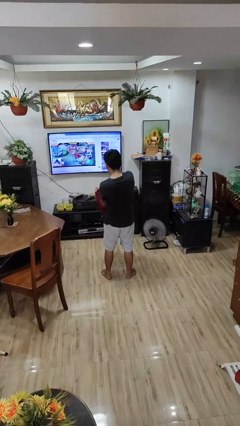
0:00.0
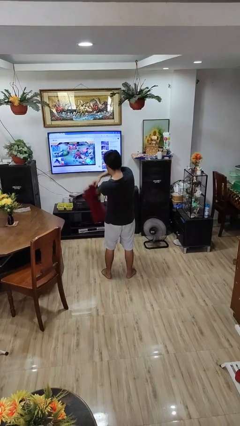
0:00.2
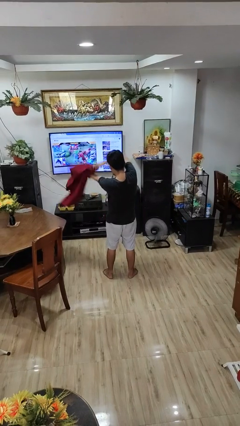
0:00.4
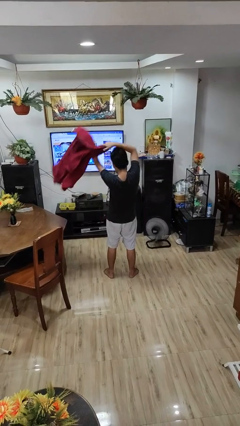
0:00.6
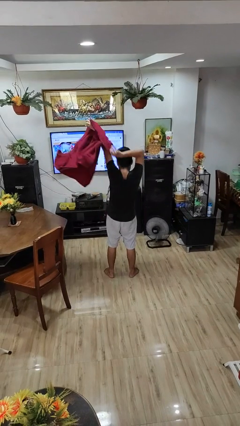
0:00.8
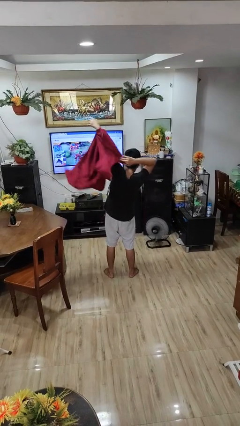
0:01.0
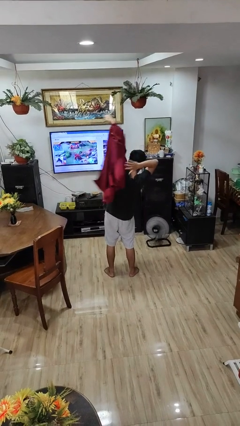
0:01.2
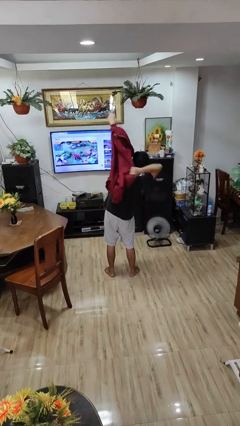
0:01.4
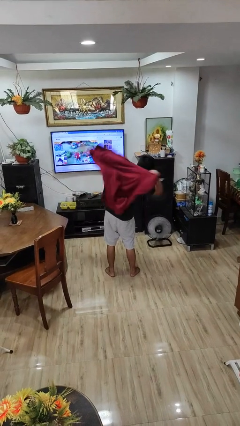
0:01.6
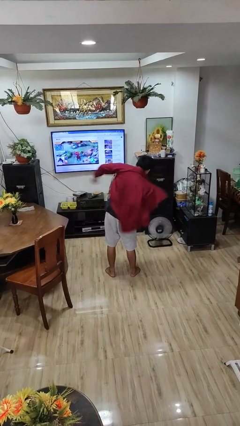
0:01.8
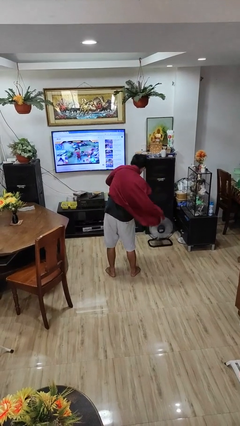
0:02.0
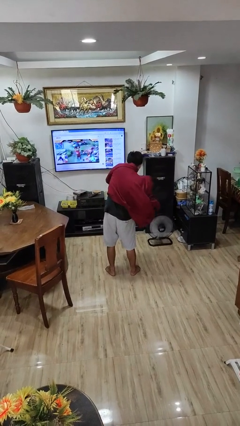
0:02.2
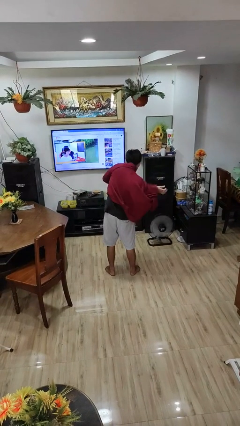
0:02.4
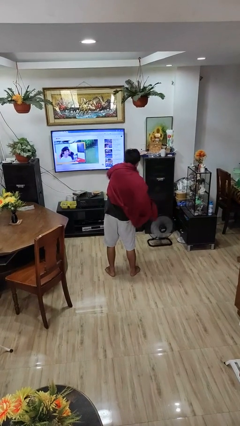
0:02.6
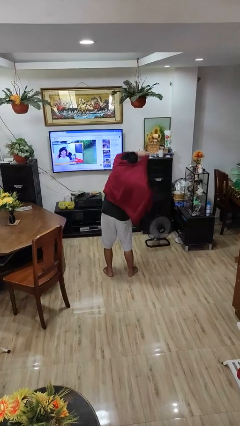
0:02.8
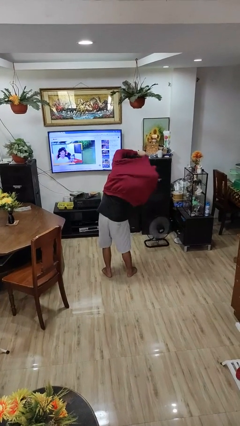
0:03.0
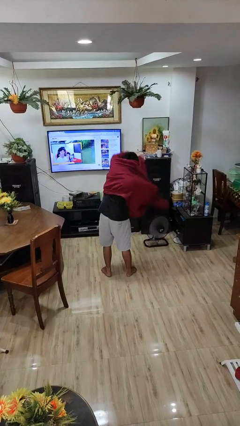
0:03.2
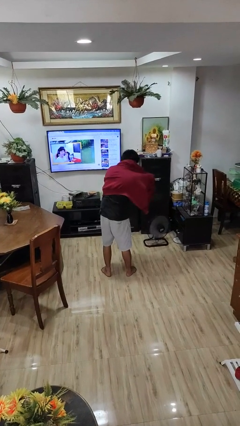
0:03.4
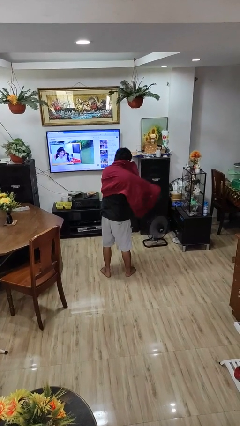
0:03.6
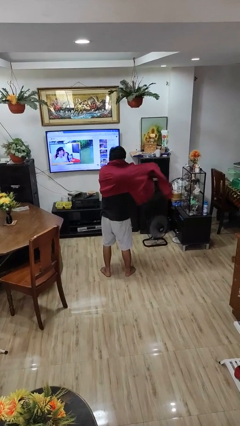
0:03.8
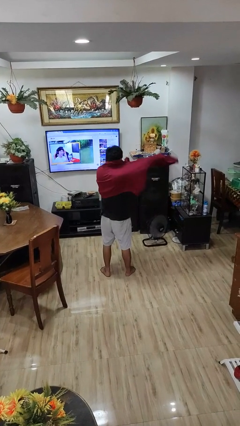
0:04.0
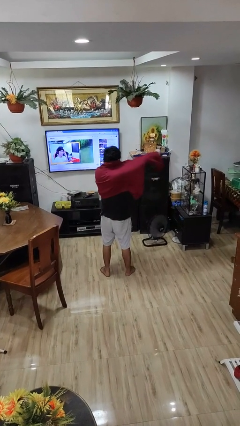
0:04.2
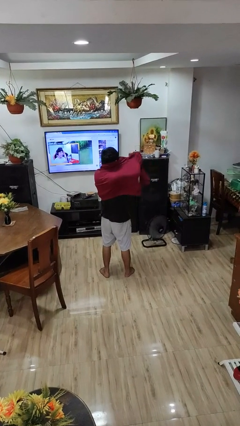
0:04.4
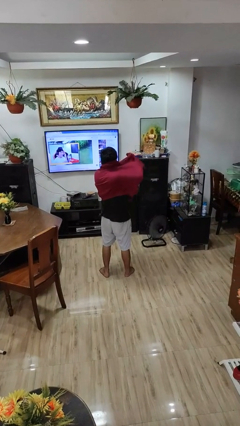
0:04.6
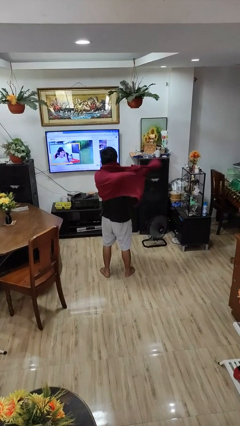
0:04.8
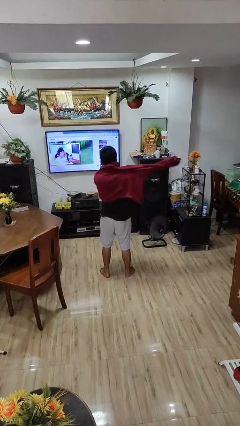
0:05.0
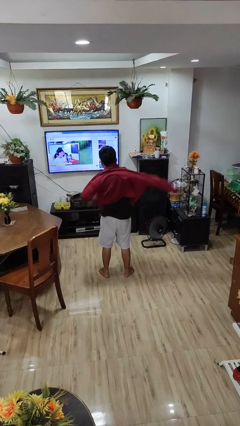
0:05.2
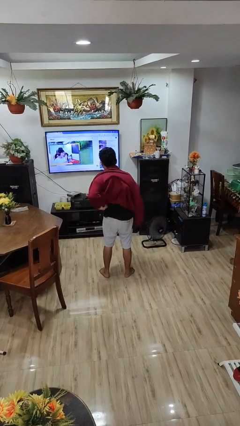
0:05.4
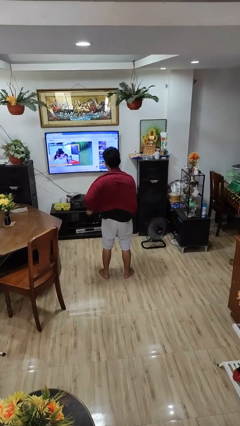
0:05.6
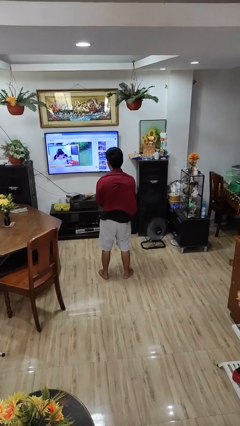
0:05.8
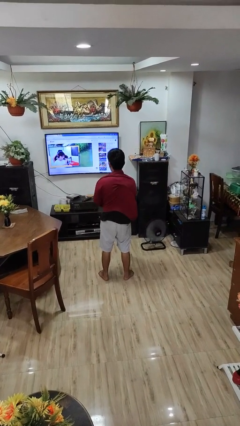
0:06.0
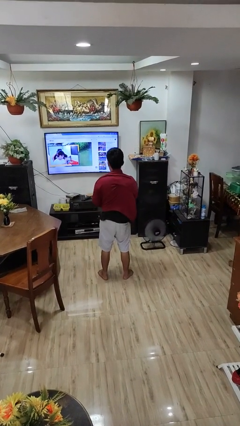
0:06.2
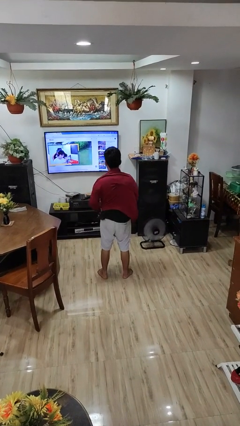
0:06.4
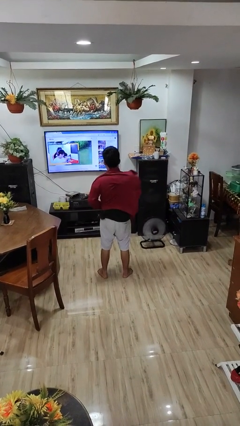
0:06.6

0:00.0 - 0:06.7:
person puts on jacket

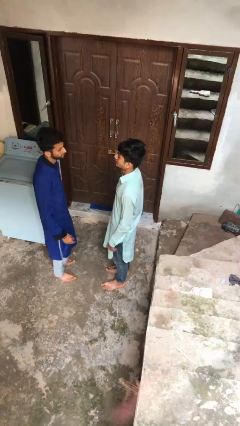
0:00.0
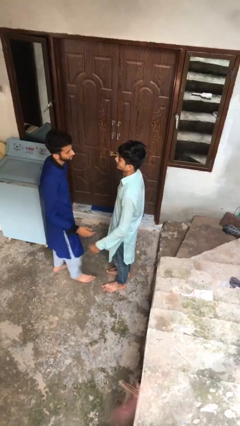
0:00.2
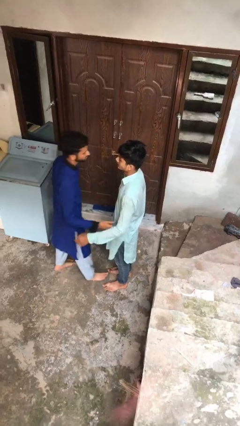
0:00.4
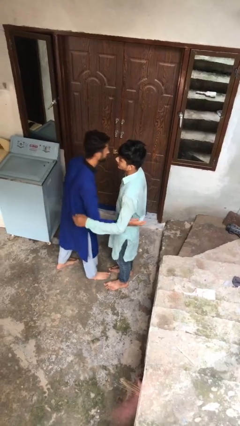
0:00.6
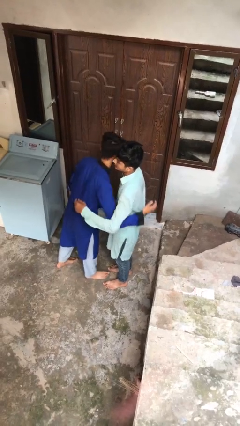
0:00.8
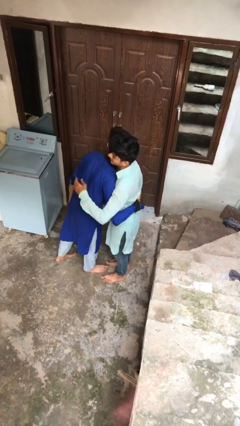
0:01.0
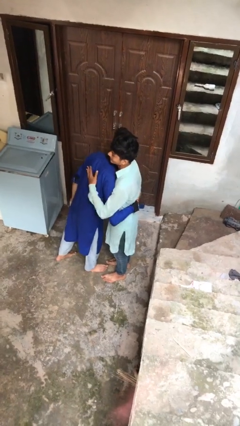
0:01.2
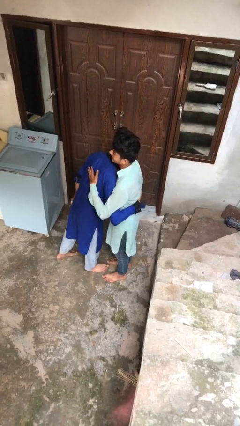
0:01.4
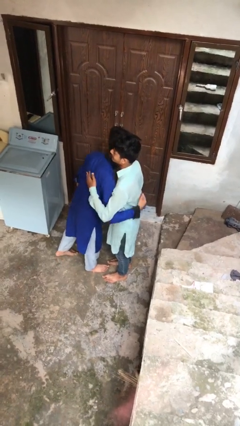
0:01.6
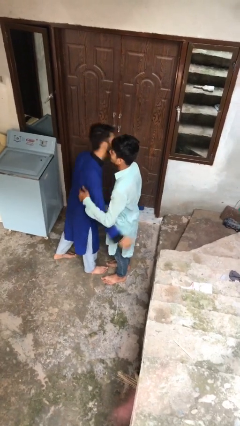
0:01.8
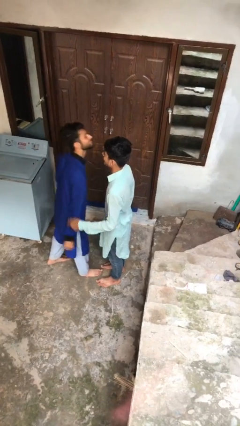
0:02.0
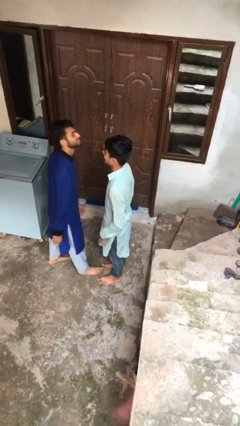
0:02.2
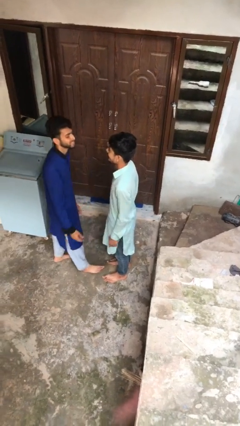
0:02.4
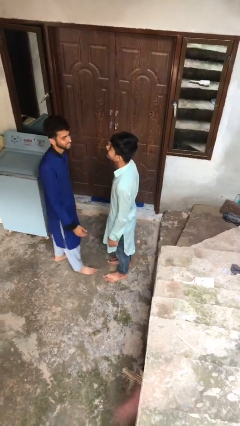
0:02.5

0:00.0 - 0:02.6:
person embraces person

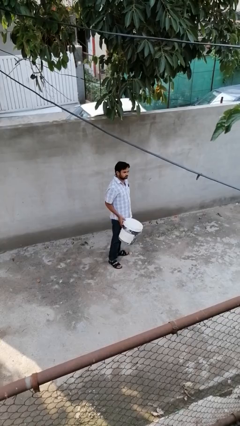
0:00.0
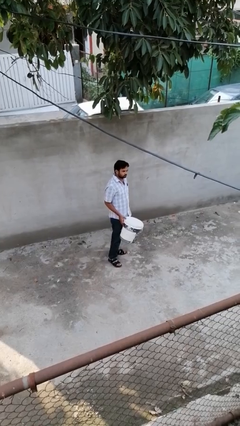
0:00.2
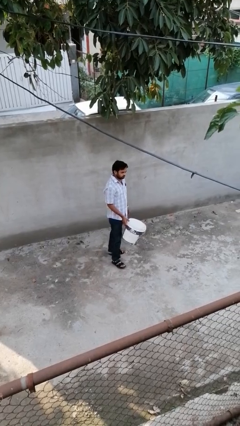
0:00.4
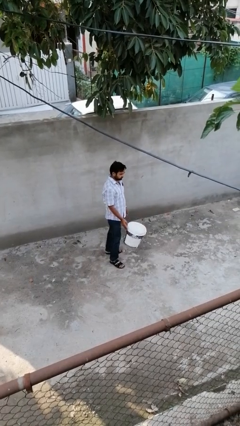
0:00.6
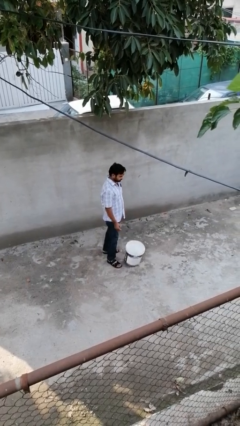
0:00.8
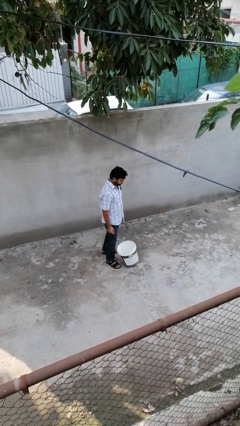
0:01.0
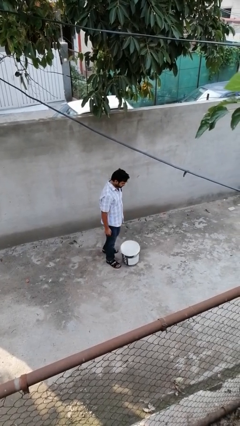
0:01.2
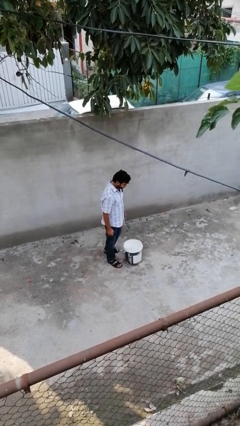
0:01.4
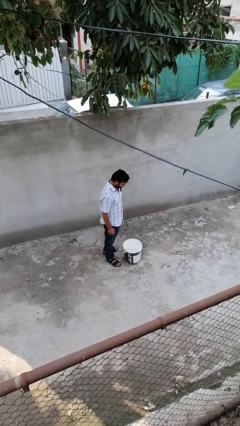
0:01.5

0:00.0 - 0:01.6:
person drops object

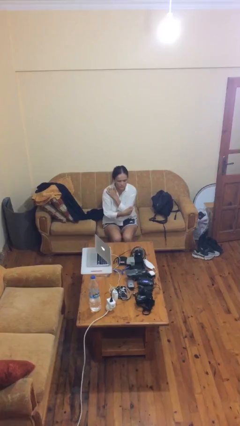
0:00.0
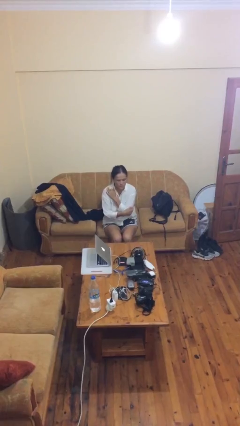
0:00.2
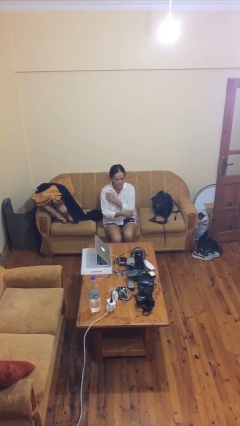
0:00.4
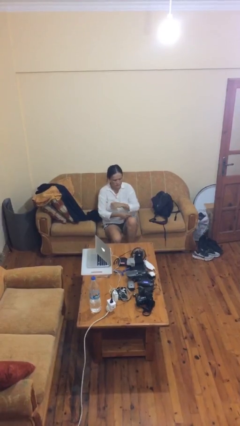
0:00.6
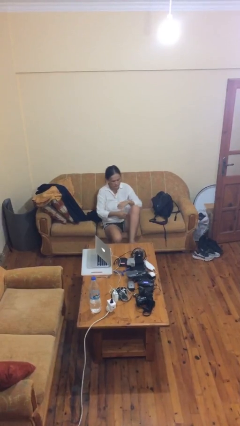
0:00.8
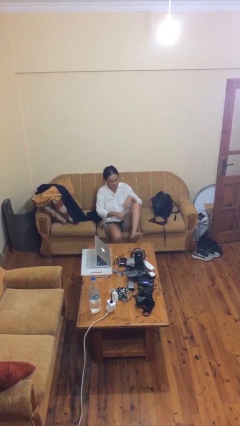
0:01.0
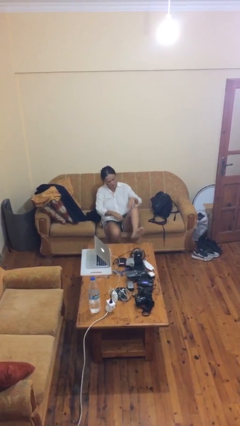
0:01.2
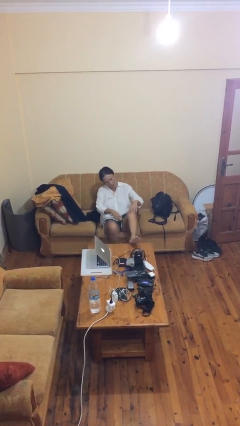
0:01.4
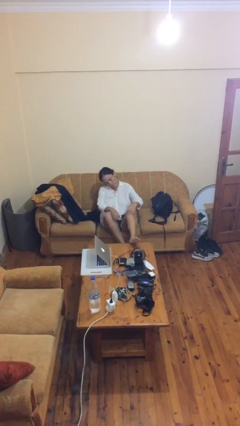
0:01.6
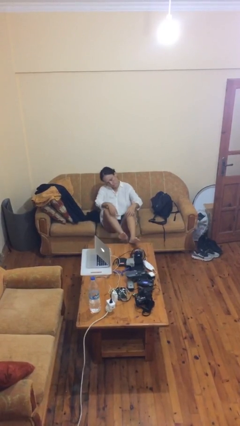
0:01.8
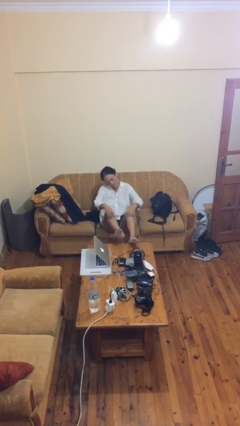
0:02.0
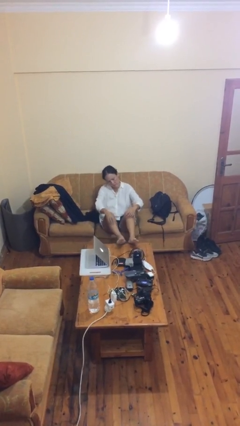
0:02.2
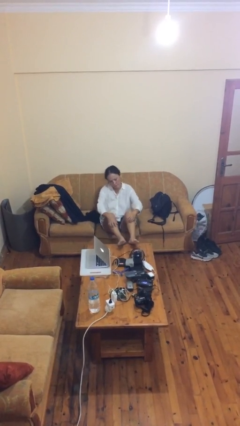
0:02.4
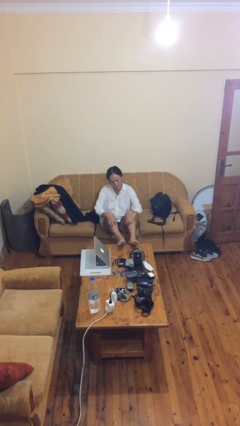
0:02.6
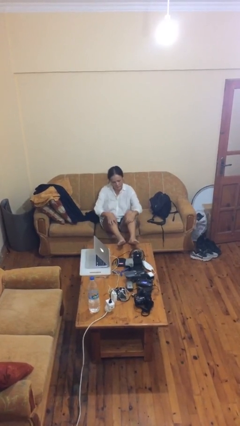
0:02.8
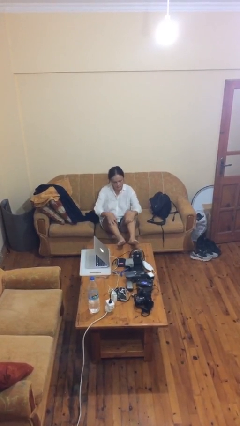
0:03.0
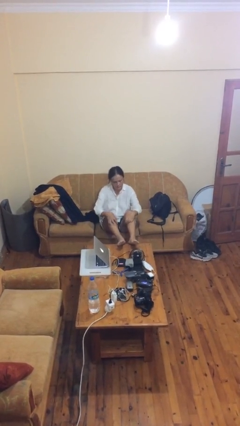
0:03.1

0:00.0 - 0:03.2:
person puts feet up

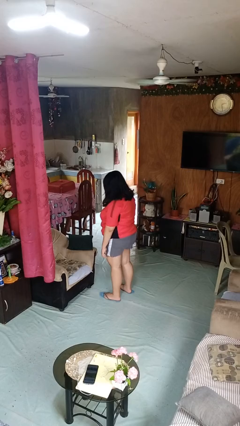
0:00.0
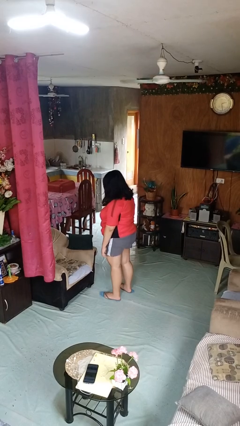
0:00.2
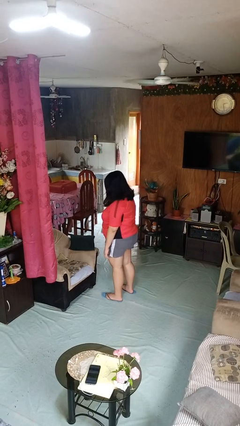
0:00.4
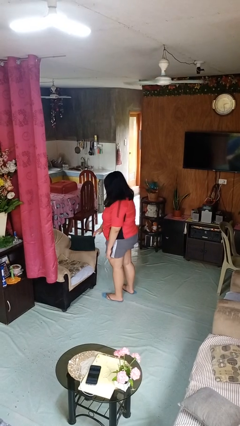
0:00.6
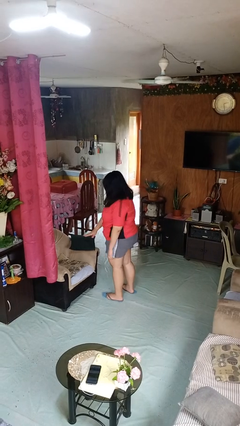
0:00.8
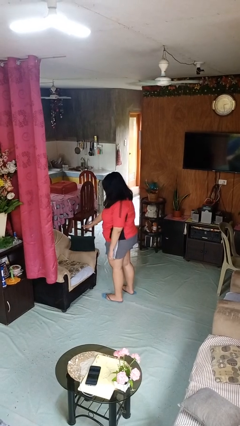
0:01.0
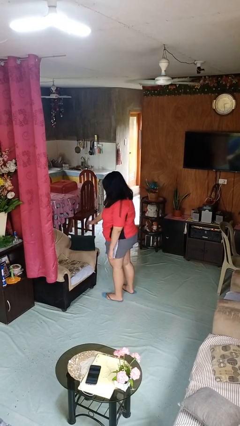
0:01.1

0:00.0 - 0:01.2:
person waves hand over object

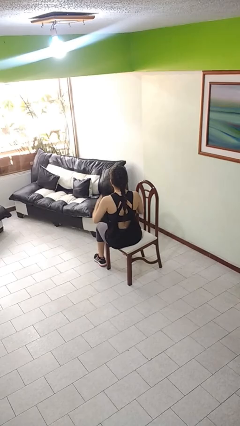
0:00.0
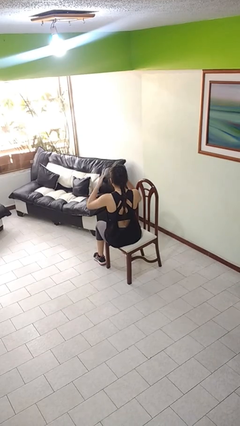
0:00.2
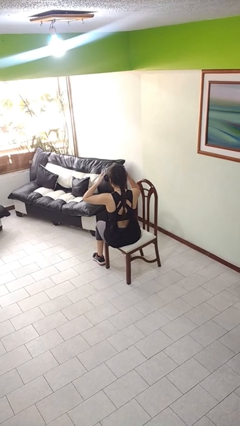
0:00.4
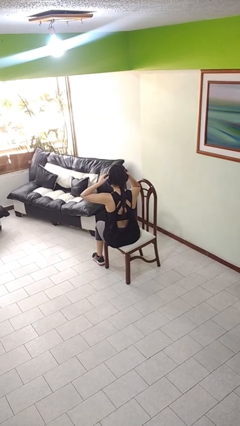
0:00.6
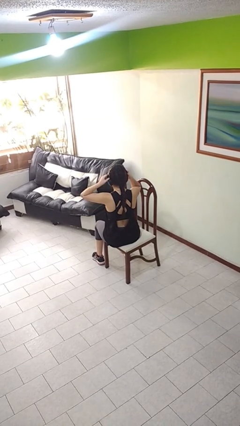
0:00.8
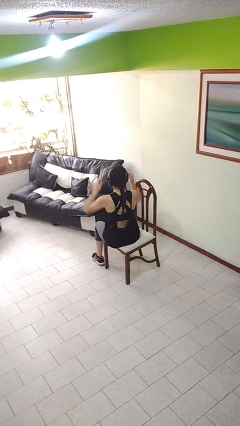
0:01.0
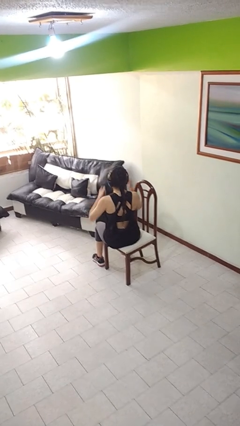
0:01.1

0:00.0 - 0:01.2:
person puts on headphones

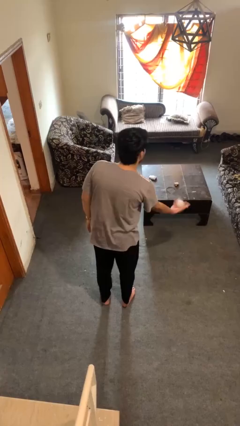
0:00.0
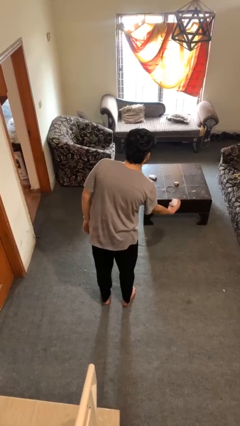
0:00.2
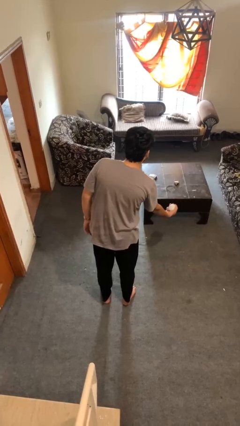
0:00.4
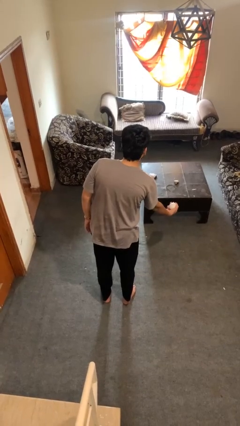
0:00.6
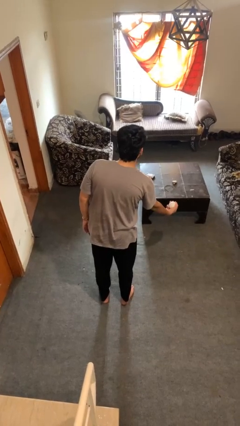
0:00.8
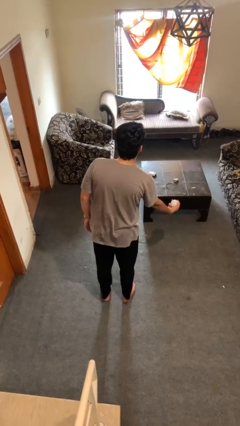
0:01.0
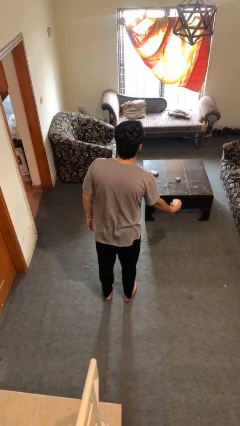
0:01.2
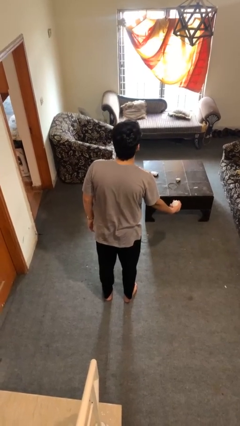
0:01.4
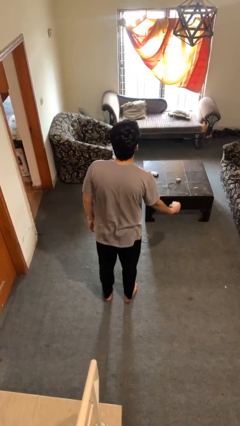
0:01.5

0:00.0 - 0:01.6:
person catches dropped object
